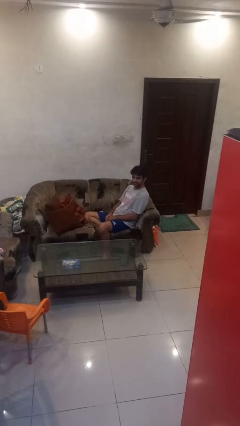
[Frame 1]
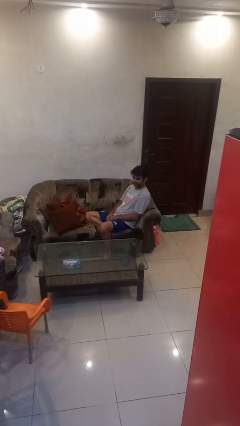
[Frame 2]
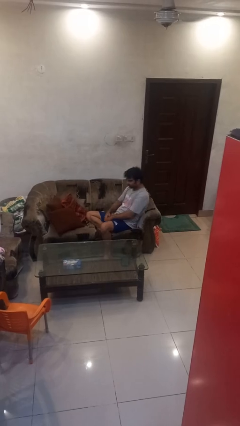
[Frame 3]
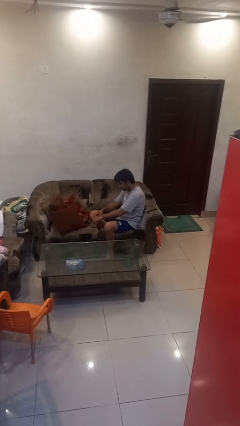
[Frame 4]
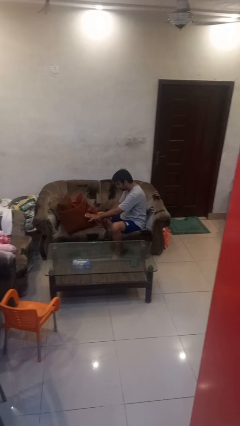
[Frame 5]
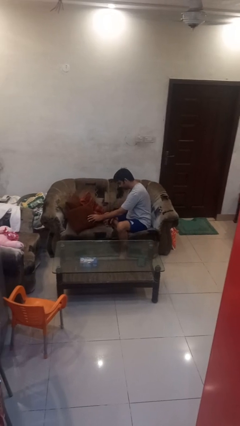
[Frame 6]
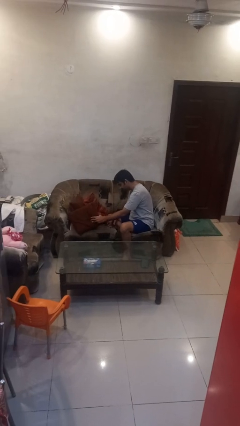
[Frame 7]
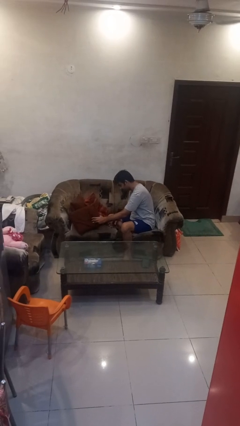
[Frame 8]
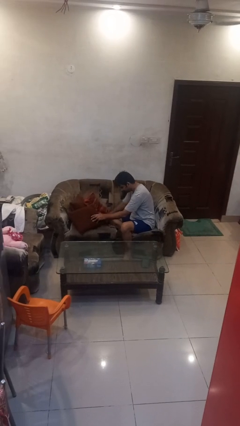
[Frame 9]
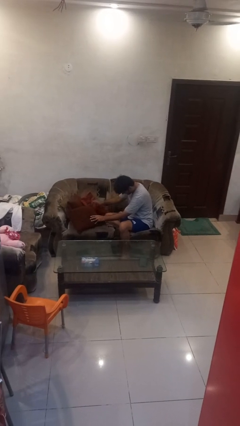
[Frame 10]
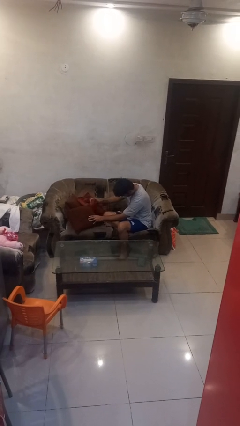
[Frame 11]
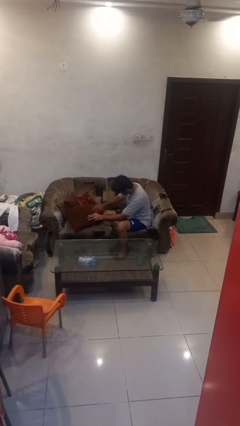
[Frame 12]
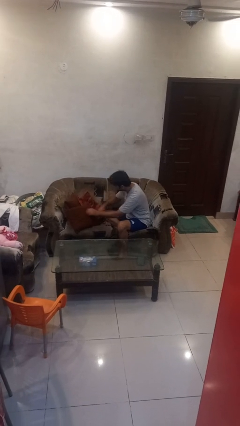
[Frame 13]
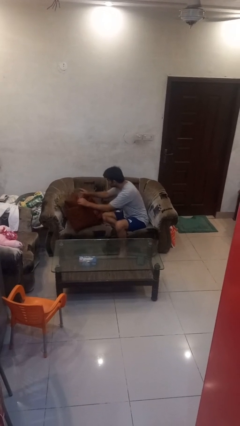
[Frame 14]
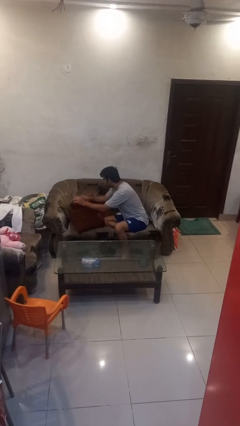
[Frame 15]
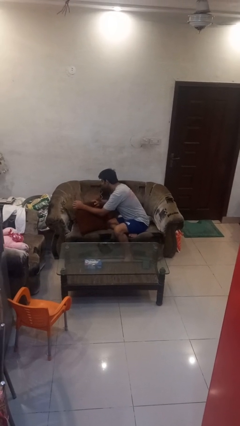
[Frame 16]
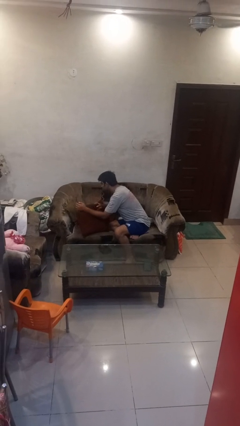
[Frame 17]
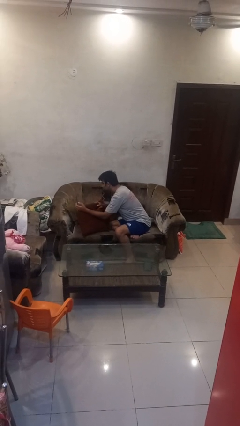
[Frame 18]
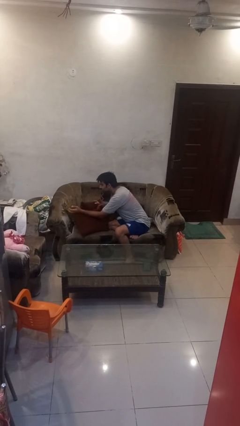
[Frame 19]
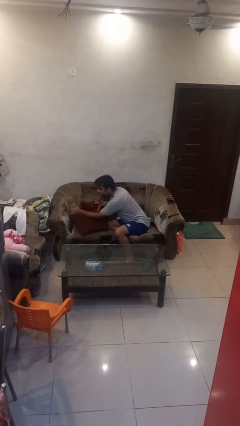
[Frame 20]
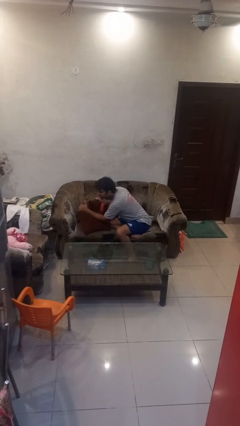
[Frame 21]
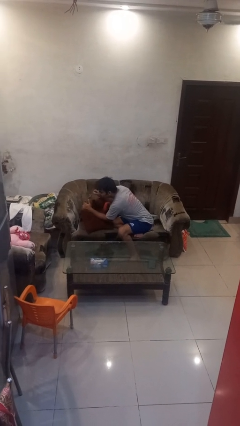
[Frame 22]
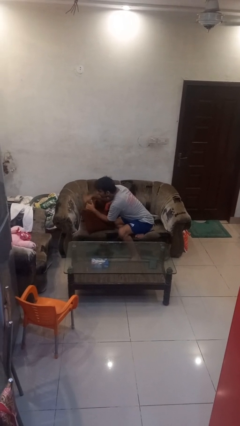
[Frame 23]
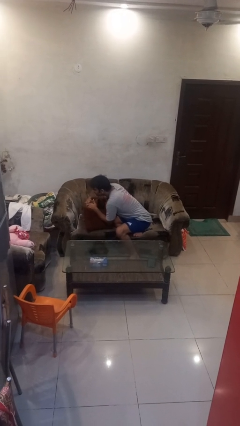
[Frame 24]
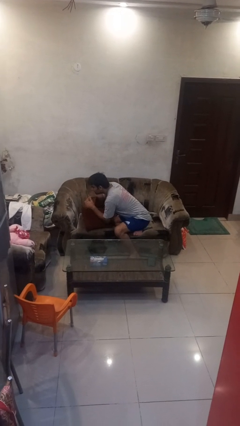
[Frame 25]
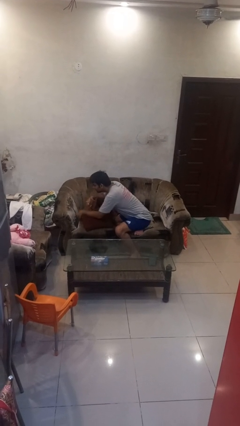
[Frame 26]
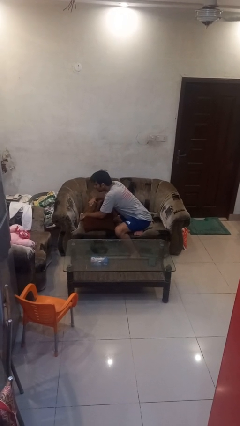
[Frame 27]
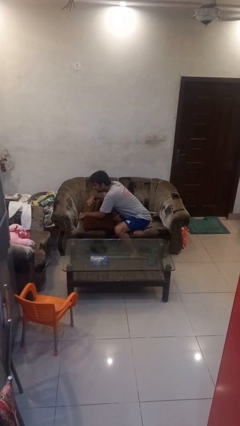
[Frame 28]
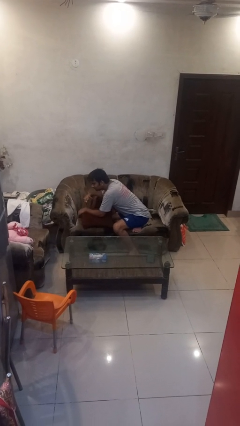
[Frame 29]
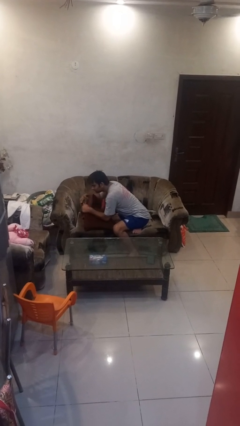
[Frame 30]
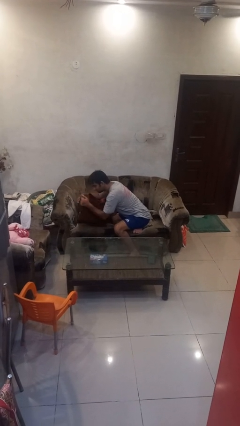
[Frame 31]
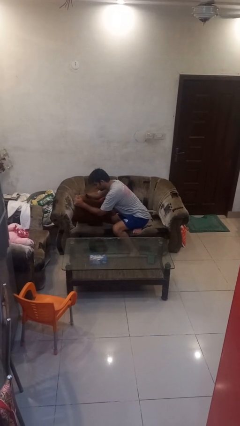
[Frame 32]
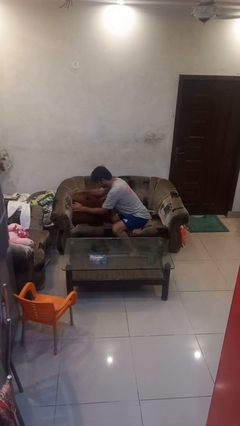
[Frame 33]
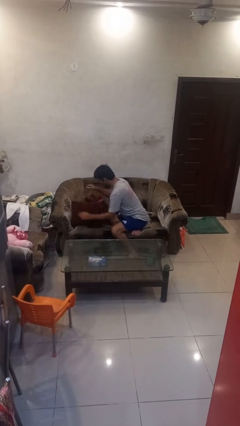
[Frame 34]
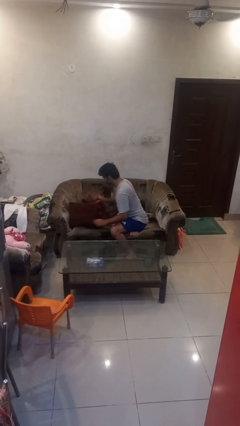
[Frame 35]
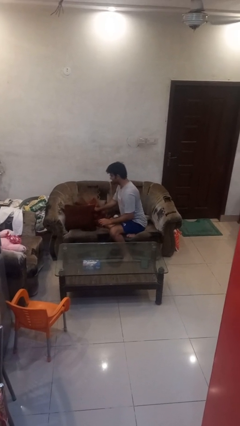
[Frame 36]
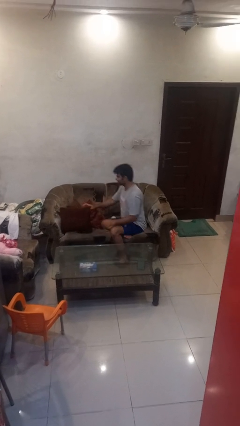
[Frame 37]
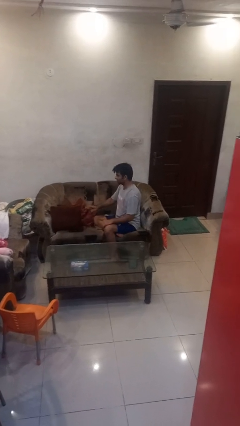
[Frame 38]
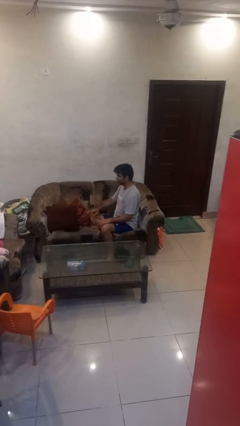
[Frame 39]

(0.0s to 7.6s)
person searches in couch

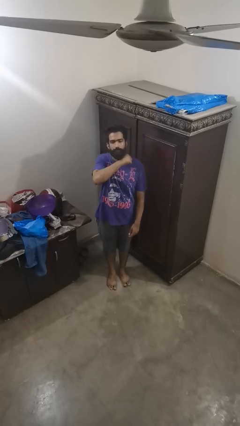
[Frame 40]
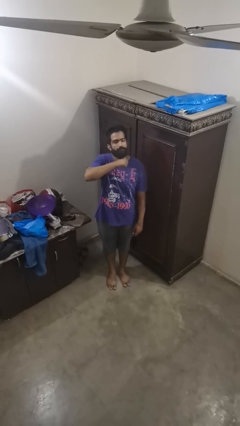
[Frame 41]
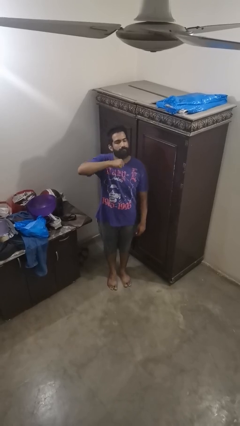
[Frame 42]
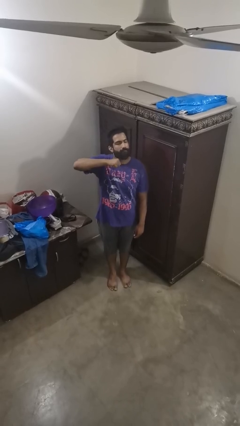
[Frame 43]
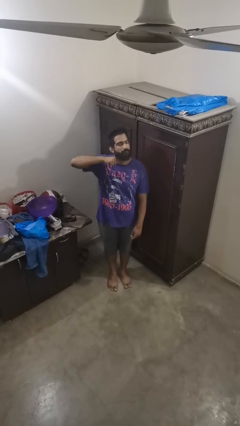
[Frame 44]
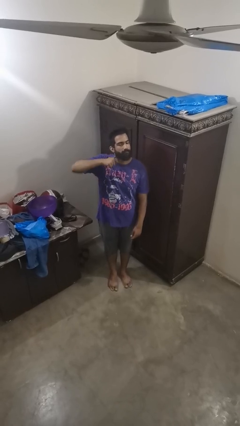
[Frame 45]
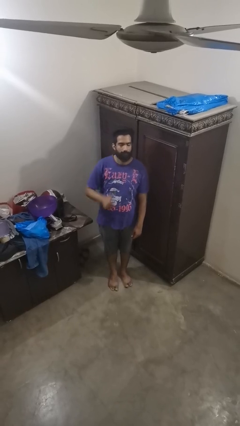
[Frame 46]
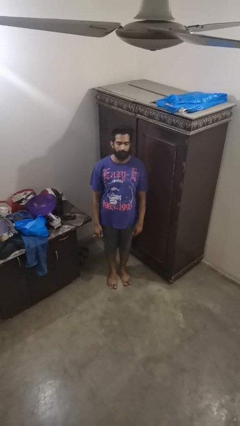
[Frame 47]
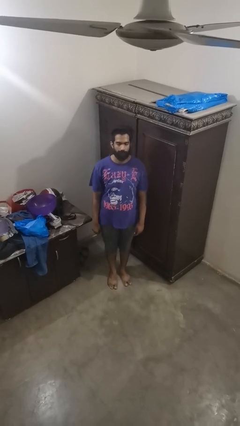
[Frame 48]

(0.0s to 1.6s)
person gestures cut

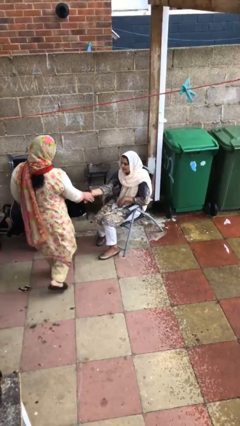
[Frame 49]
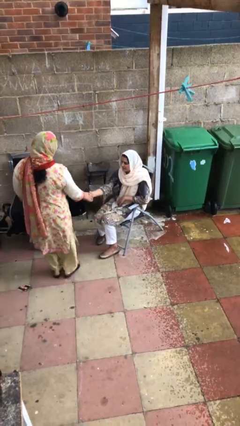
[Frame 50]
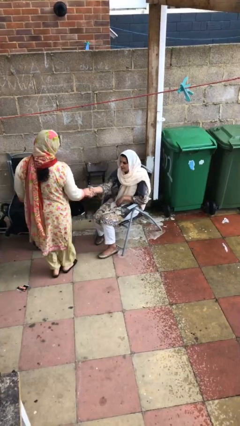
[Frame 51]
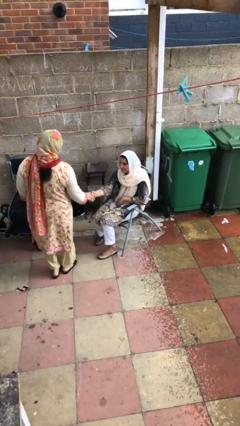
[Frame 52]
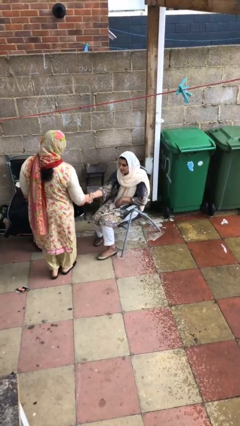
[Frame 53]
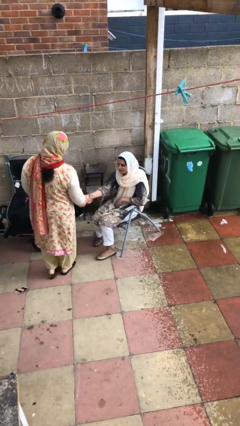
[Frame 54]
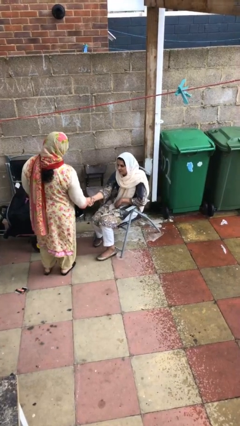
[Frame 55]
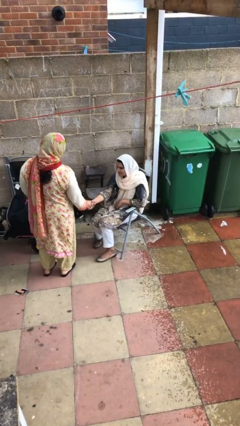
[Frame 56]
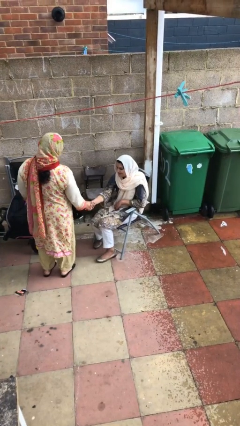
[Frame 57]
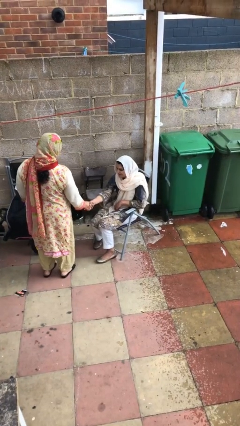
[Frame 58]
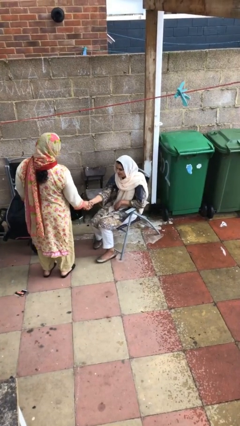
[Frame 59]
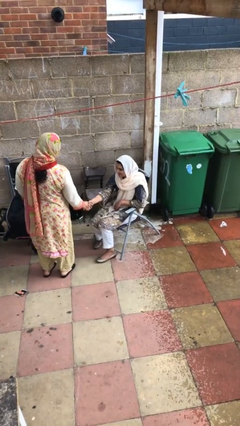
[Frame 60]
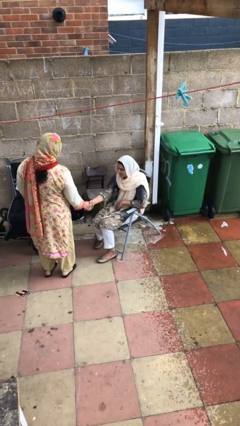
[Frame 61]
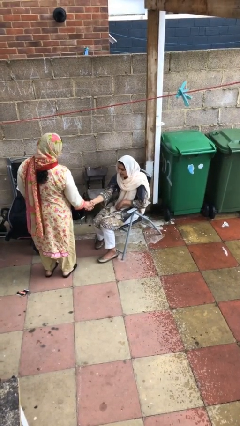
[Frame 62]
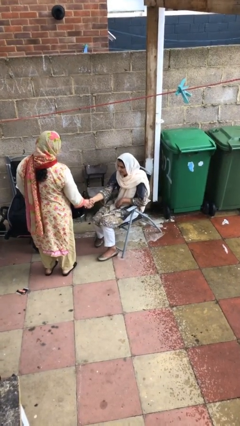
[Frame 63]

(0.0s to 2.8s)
person shakes hand

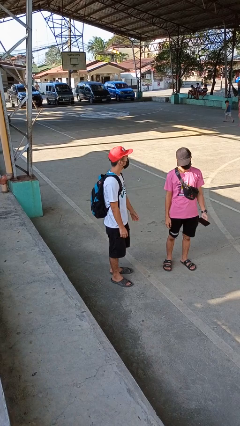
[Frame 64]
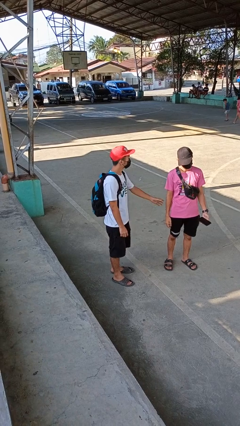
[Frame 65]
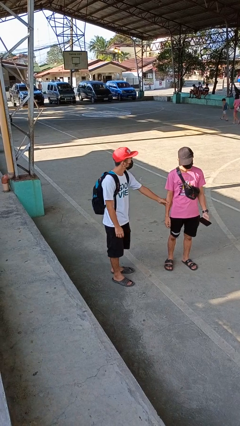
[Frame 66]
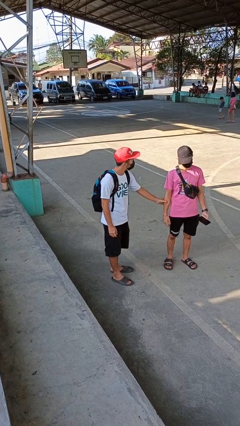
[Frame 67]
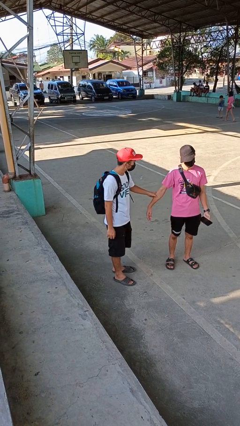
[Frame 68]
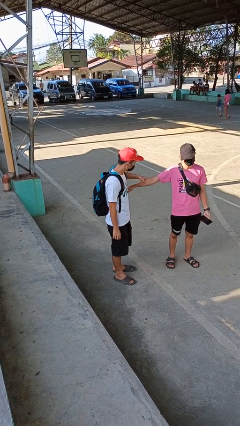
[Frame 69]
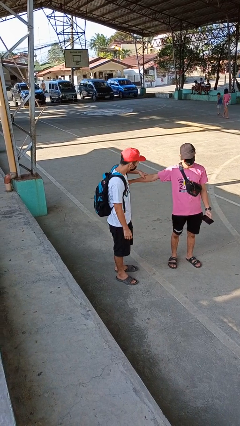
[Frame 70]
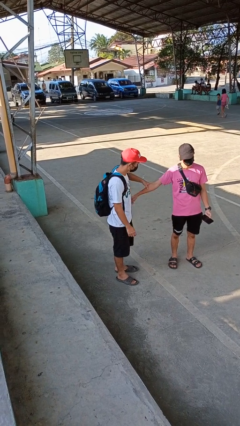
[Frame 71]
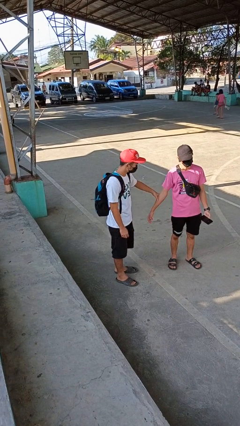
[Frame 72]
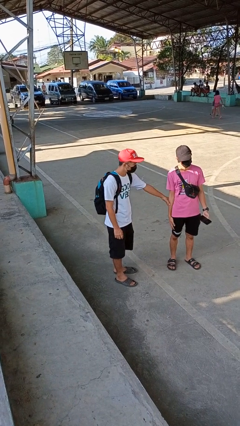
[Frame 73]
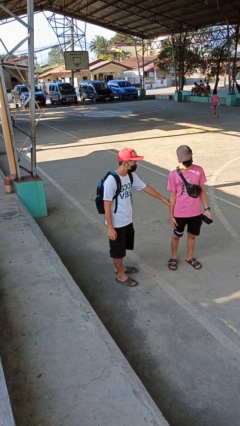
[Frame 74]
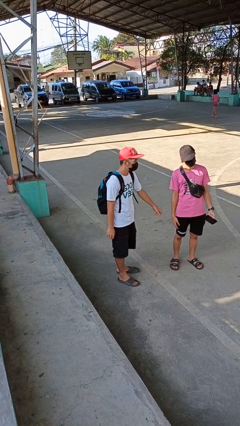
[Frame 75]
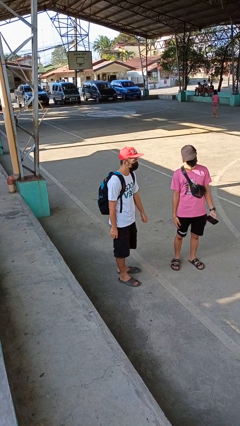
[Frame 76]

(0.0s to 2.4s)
person grabs person by forearm

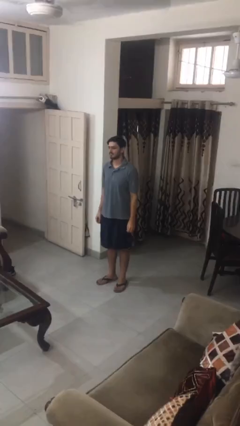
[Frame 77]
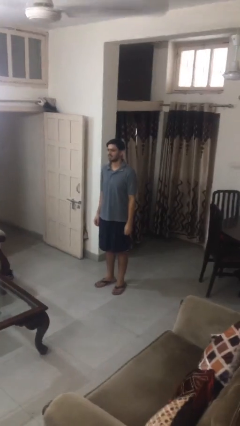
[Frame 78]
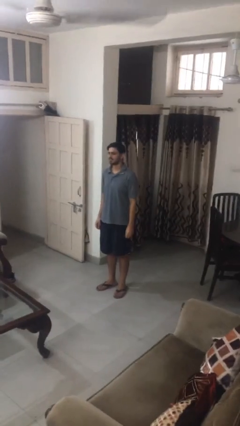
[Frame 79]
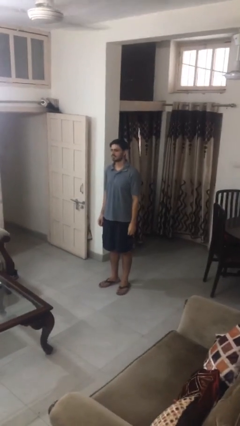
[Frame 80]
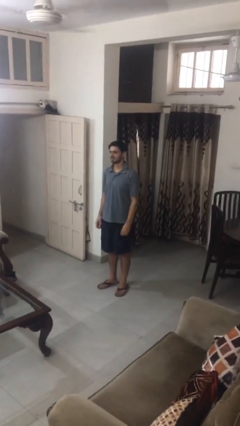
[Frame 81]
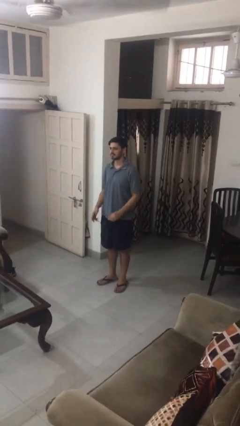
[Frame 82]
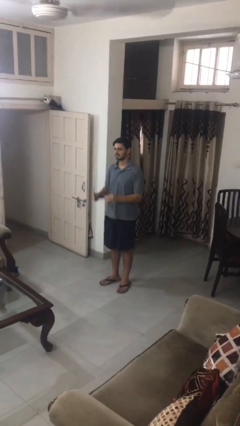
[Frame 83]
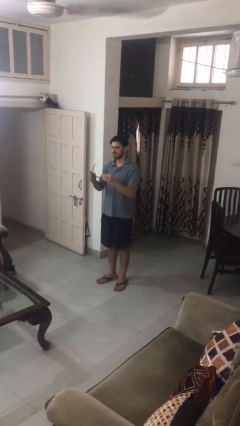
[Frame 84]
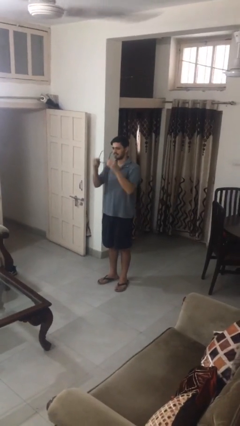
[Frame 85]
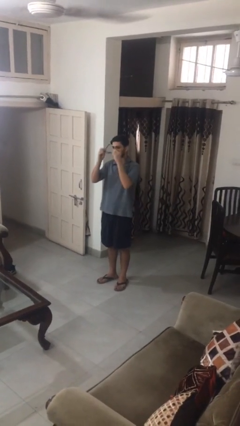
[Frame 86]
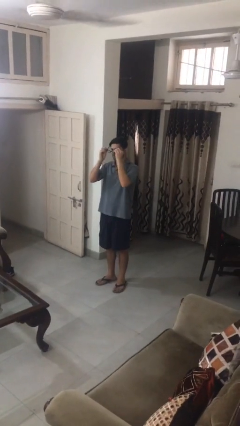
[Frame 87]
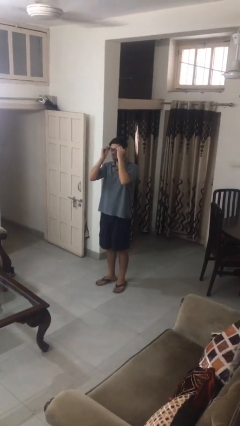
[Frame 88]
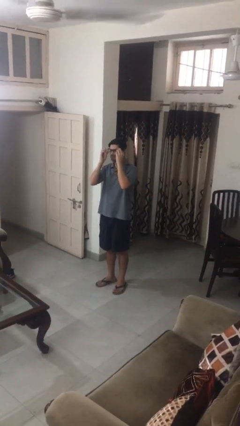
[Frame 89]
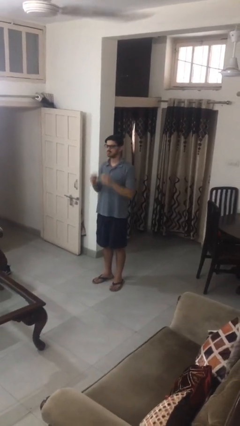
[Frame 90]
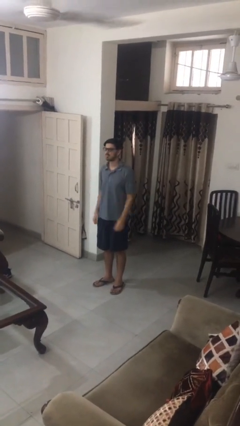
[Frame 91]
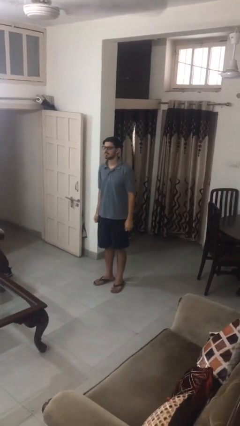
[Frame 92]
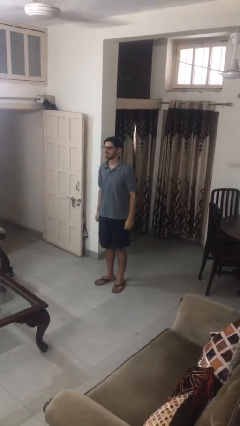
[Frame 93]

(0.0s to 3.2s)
person puts on glasses
